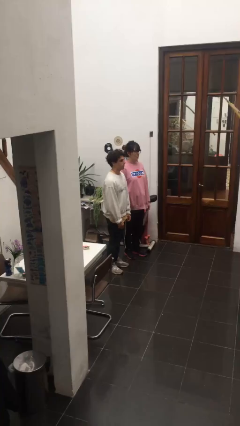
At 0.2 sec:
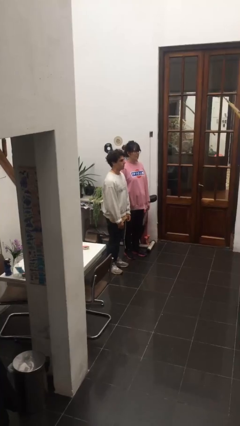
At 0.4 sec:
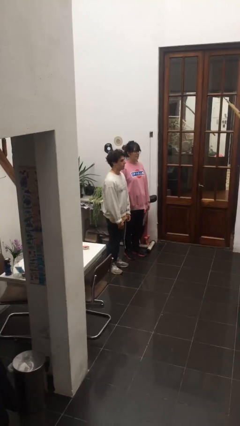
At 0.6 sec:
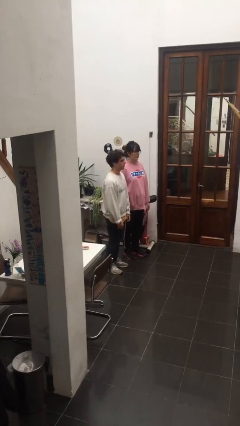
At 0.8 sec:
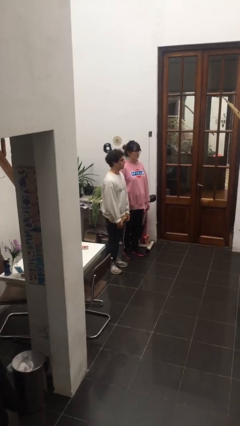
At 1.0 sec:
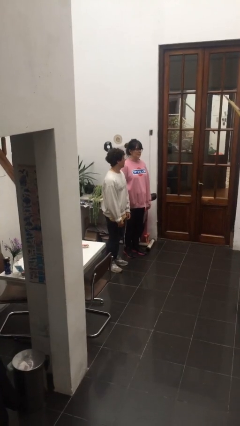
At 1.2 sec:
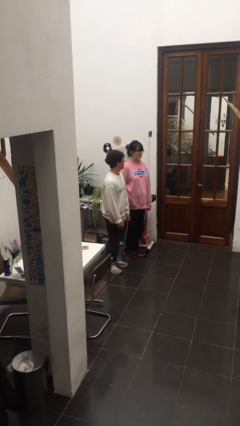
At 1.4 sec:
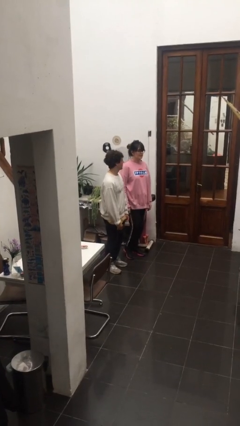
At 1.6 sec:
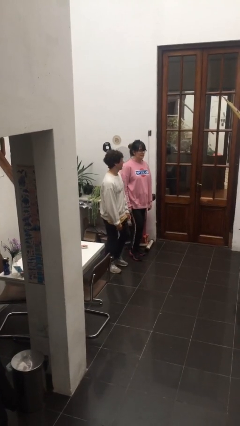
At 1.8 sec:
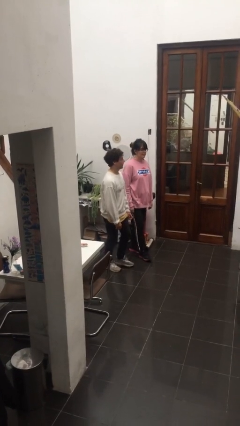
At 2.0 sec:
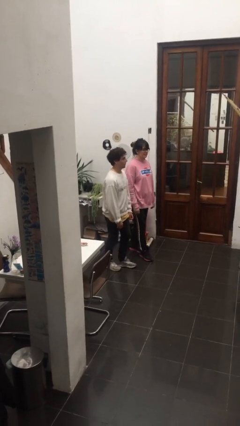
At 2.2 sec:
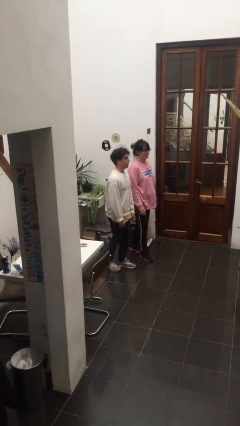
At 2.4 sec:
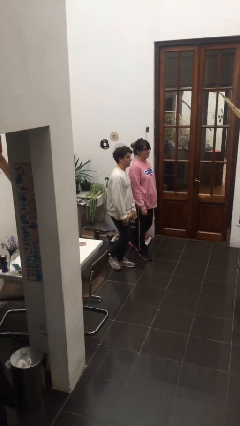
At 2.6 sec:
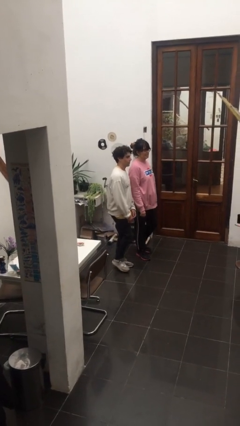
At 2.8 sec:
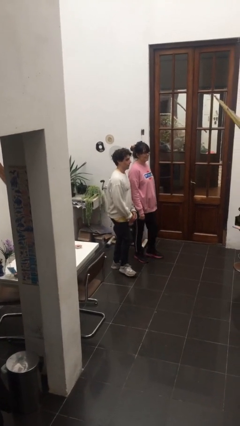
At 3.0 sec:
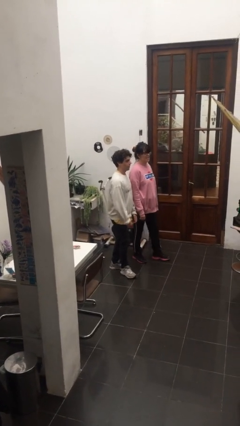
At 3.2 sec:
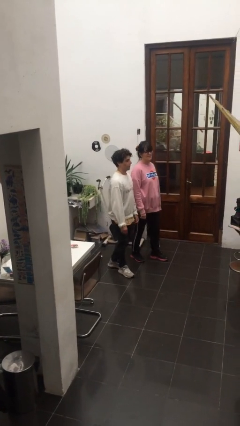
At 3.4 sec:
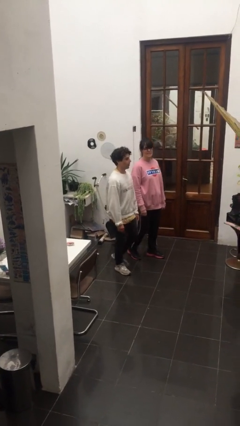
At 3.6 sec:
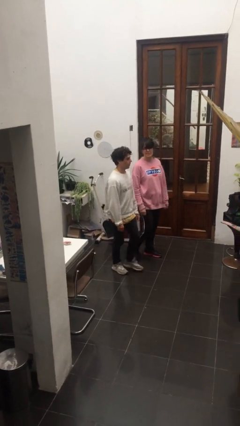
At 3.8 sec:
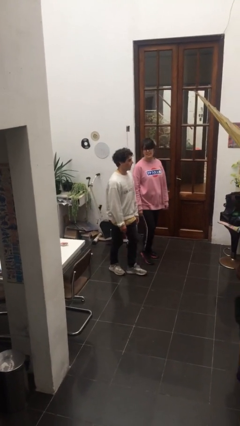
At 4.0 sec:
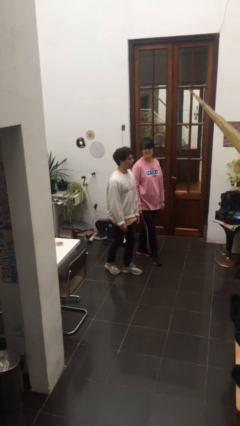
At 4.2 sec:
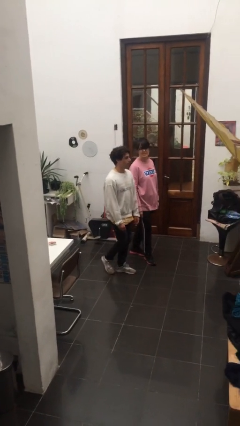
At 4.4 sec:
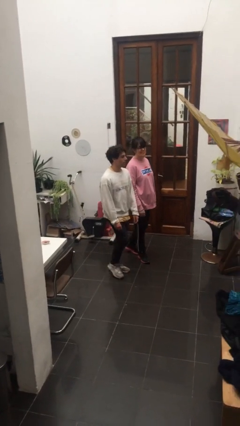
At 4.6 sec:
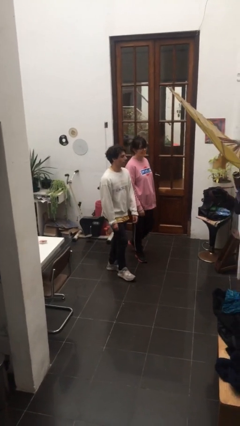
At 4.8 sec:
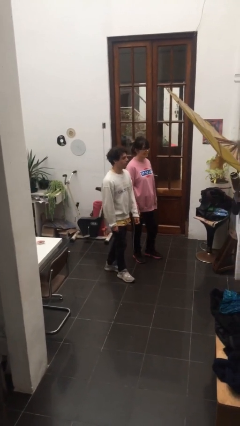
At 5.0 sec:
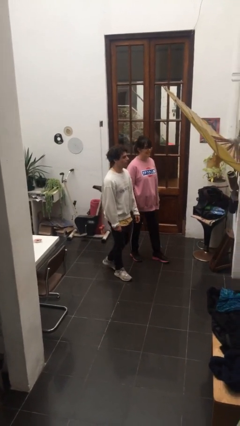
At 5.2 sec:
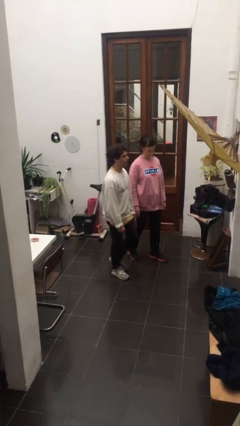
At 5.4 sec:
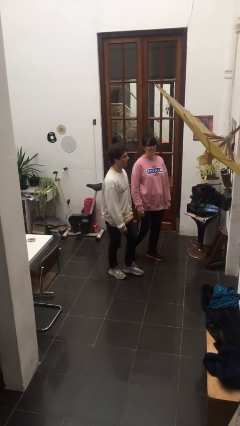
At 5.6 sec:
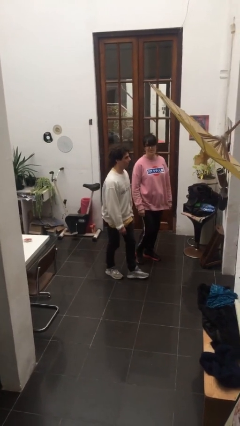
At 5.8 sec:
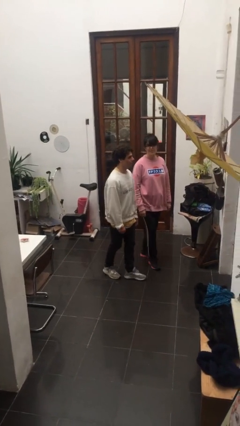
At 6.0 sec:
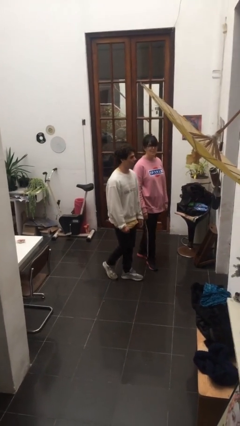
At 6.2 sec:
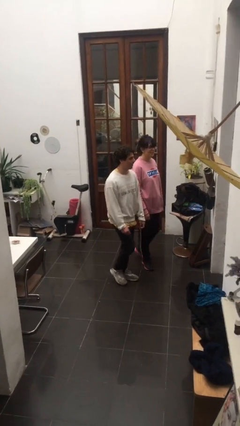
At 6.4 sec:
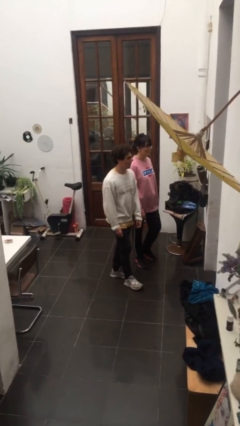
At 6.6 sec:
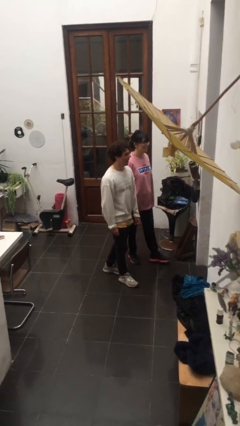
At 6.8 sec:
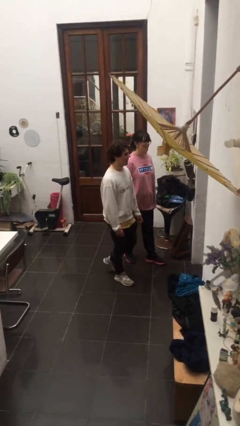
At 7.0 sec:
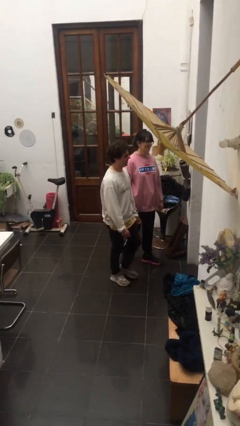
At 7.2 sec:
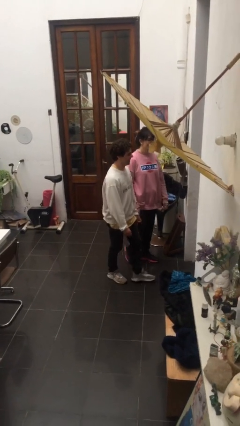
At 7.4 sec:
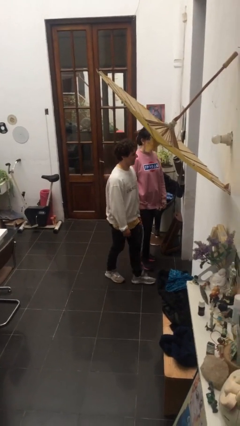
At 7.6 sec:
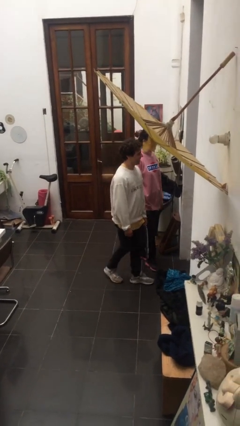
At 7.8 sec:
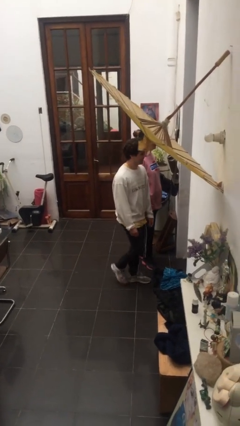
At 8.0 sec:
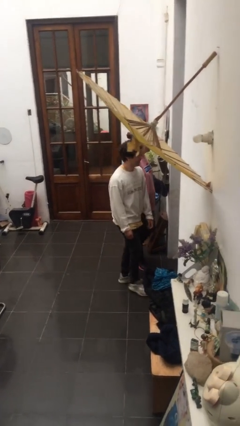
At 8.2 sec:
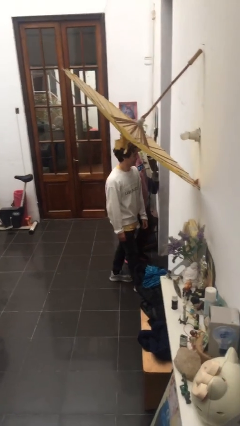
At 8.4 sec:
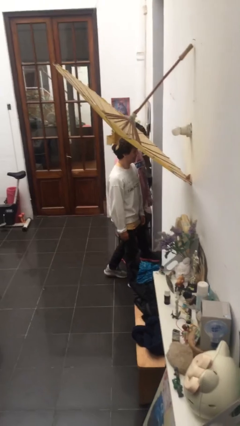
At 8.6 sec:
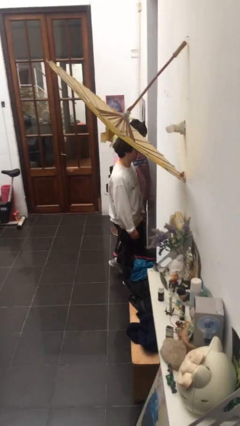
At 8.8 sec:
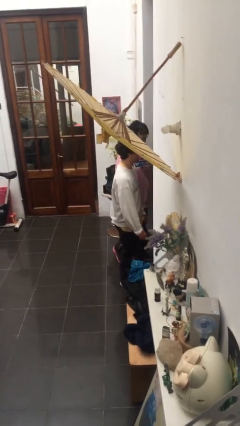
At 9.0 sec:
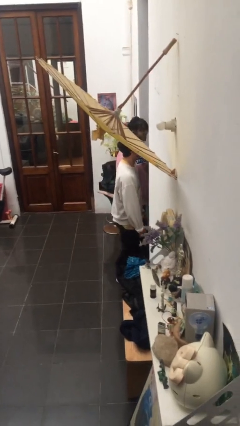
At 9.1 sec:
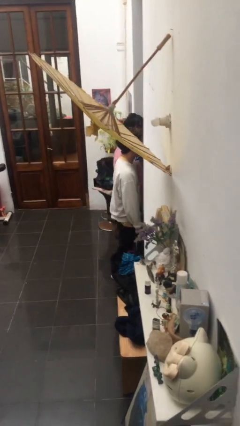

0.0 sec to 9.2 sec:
person talks to person

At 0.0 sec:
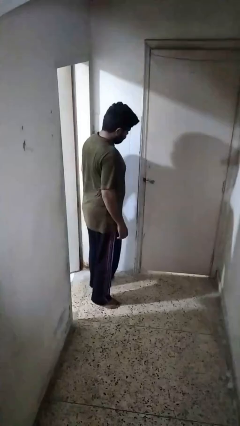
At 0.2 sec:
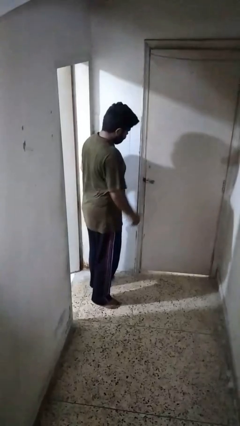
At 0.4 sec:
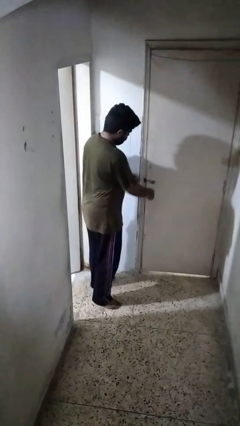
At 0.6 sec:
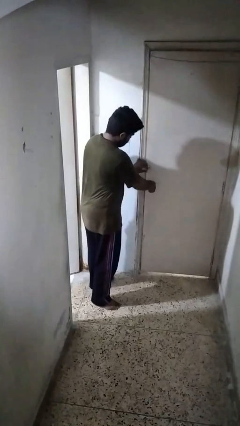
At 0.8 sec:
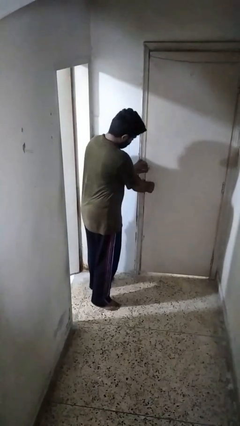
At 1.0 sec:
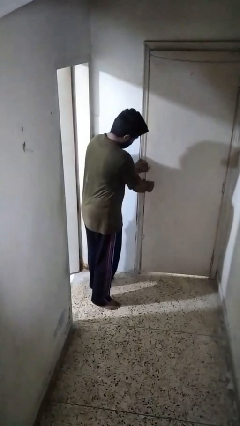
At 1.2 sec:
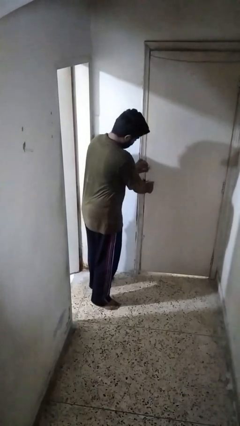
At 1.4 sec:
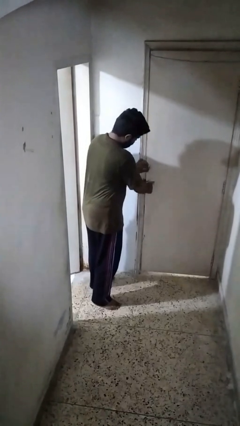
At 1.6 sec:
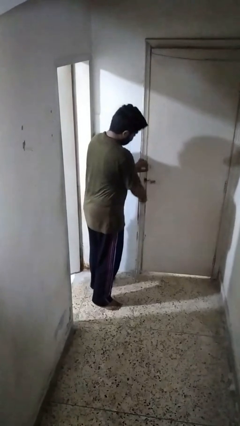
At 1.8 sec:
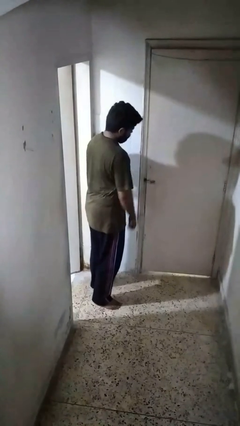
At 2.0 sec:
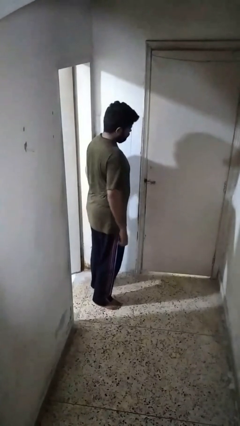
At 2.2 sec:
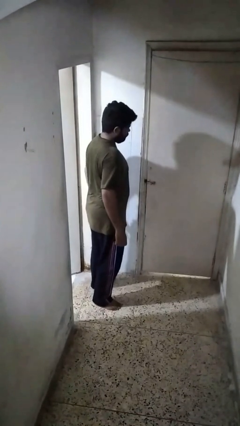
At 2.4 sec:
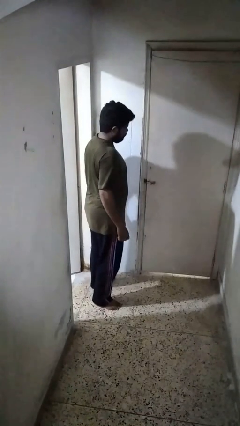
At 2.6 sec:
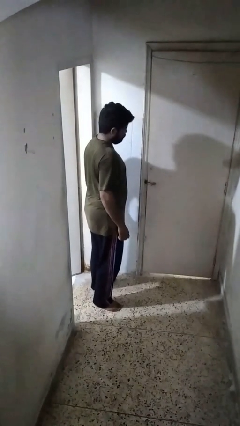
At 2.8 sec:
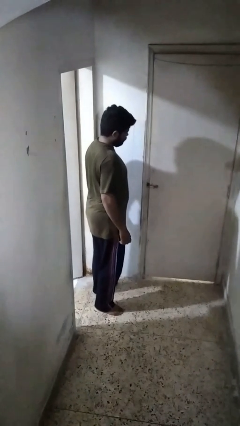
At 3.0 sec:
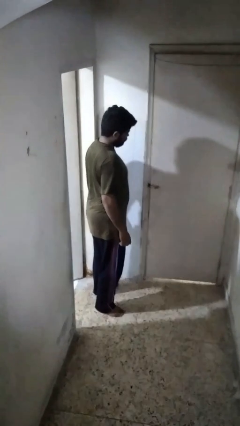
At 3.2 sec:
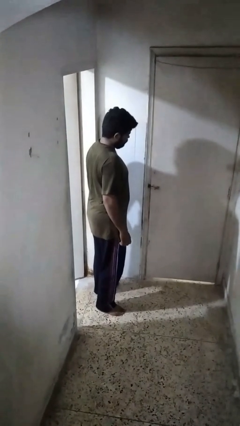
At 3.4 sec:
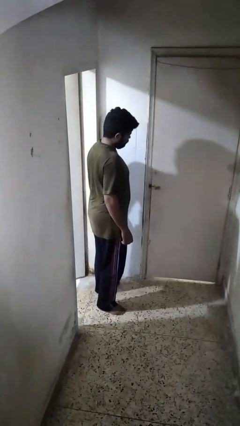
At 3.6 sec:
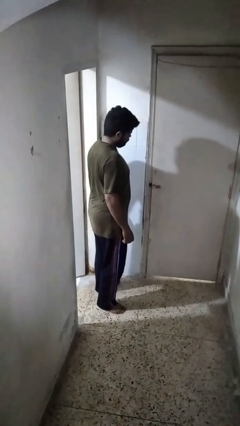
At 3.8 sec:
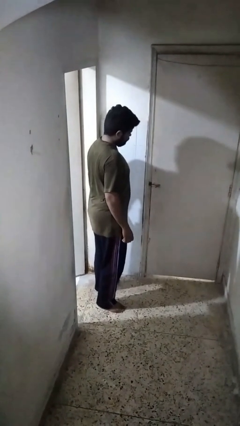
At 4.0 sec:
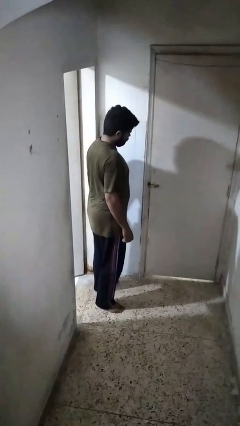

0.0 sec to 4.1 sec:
person locks door with keys

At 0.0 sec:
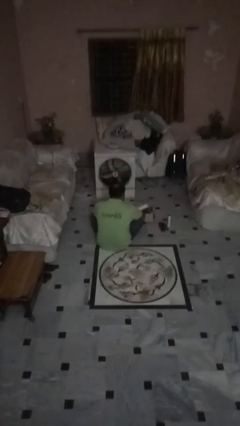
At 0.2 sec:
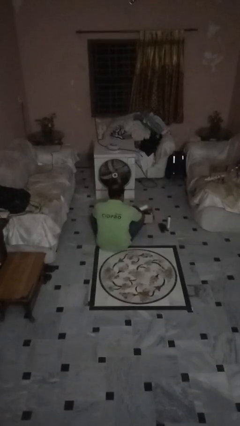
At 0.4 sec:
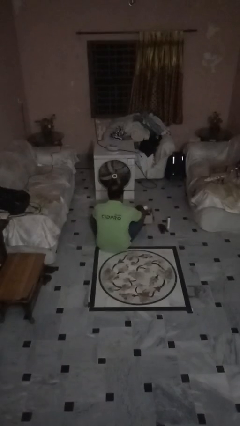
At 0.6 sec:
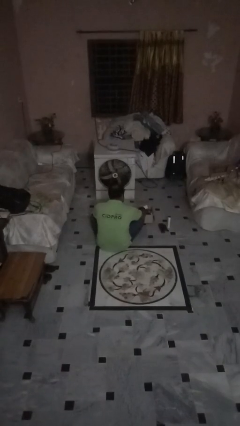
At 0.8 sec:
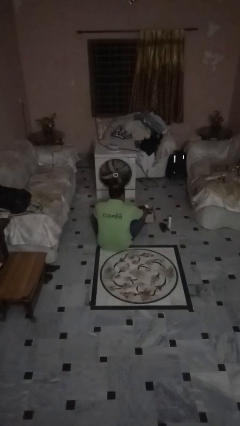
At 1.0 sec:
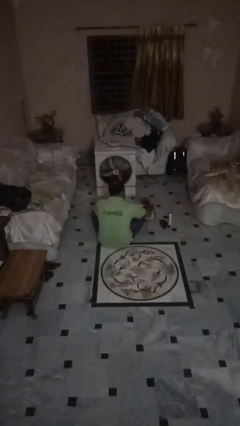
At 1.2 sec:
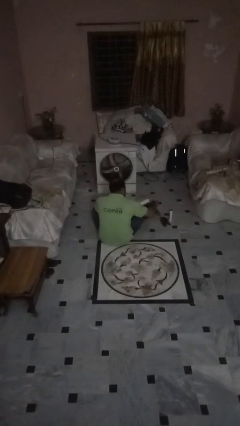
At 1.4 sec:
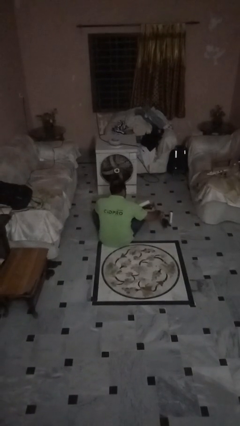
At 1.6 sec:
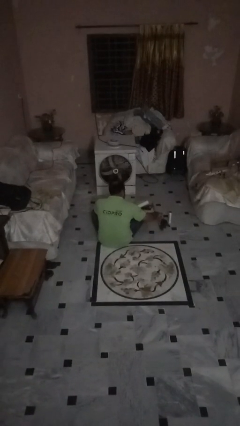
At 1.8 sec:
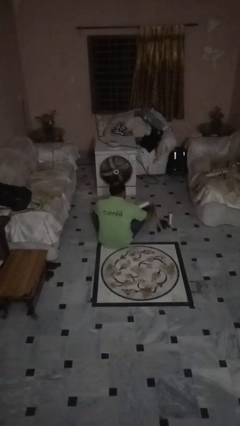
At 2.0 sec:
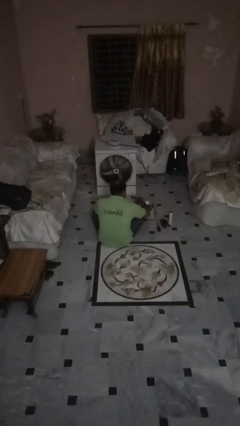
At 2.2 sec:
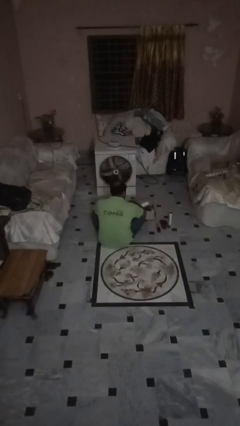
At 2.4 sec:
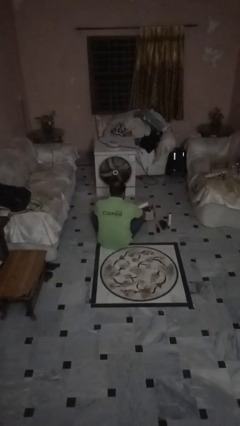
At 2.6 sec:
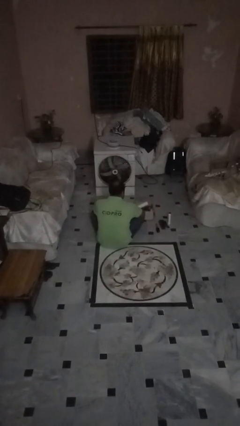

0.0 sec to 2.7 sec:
person unloads box onto floor

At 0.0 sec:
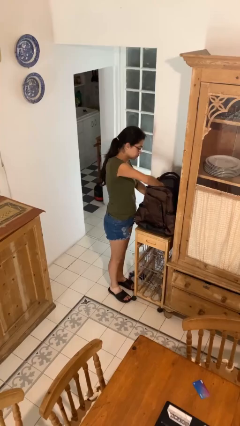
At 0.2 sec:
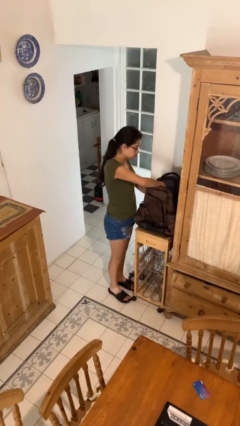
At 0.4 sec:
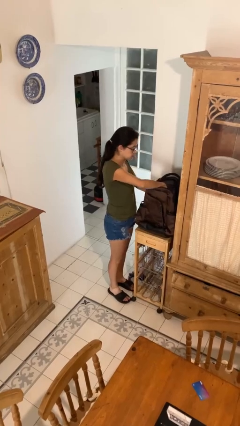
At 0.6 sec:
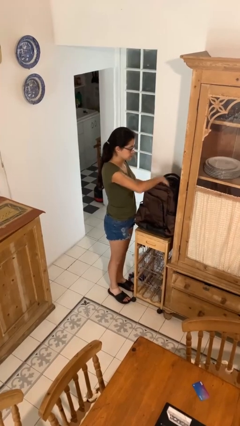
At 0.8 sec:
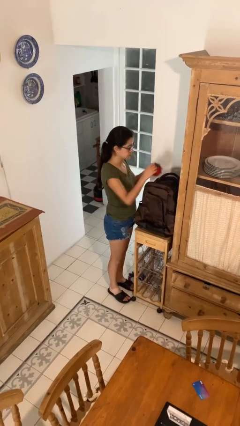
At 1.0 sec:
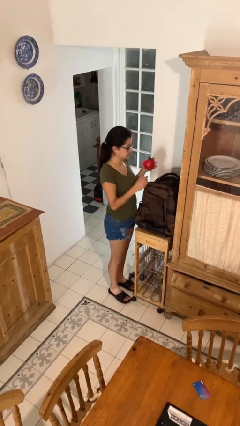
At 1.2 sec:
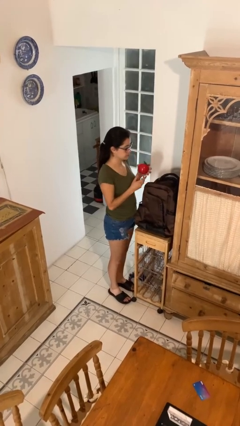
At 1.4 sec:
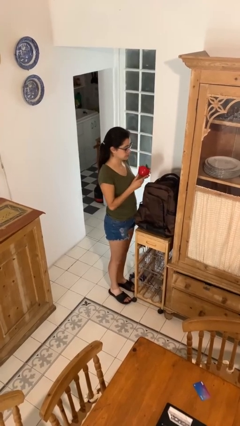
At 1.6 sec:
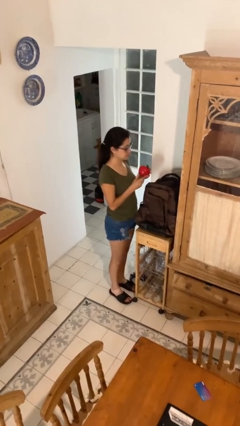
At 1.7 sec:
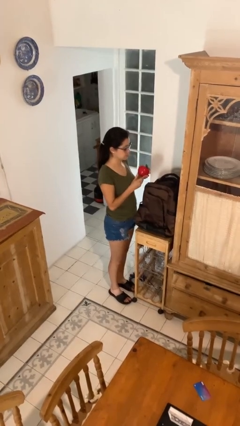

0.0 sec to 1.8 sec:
person takes object from backpack
